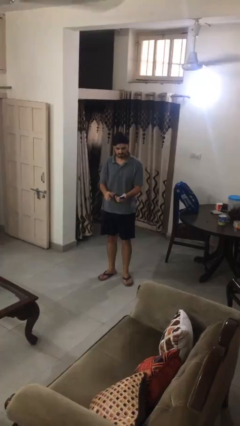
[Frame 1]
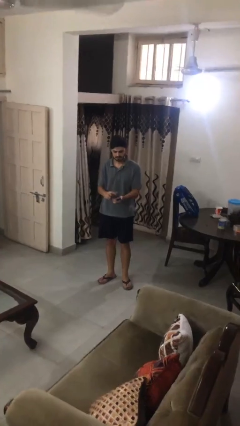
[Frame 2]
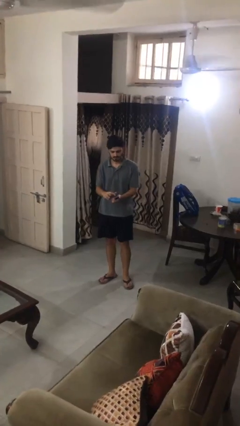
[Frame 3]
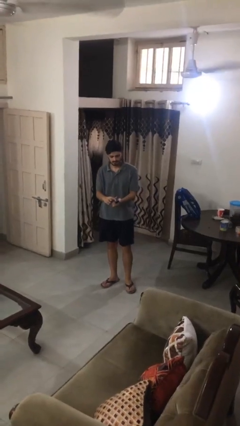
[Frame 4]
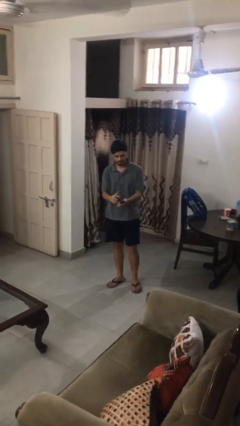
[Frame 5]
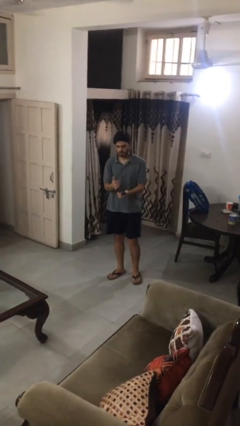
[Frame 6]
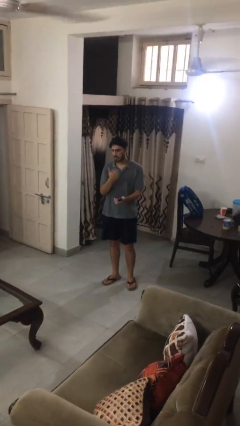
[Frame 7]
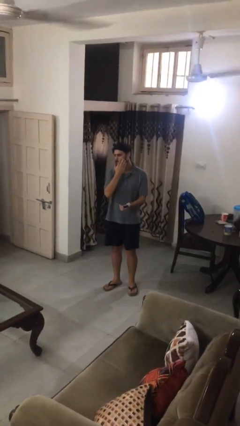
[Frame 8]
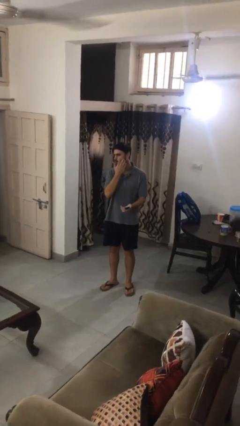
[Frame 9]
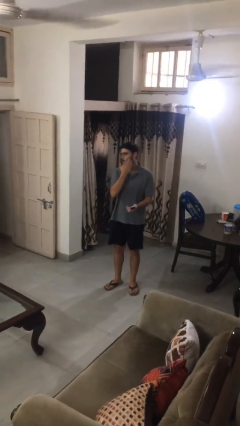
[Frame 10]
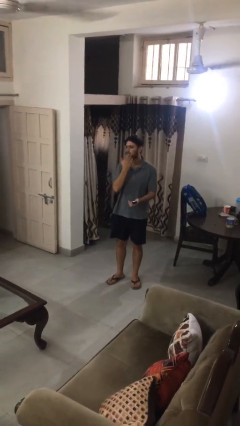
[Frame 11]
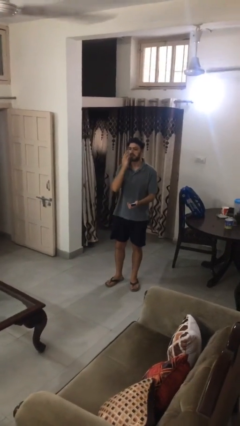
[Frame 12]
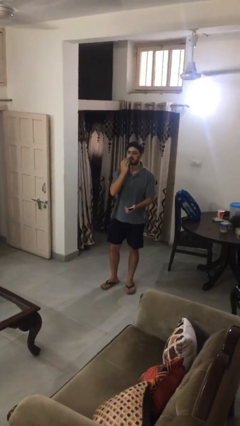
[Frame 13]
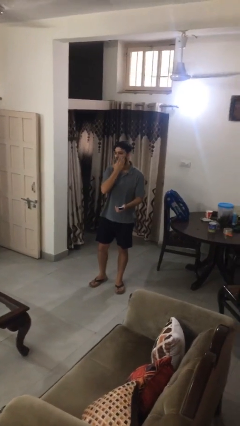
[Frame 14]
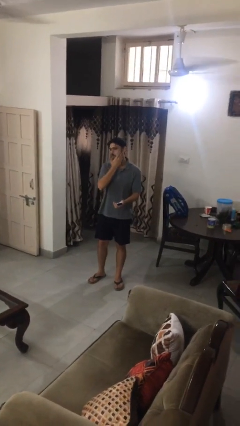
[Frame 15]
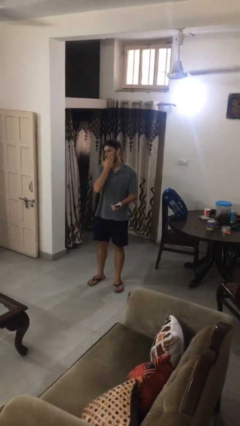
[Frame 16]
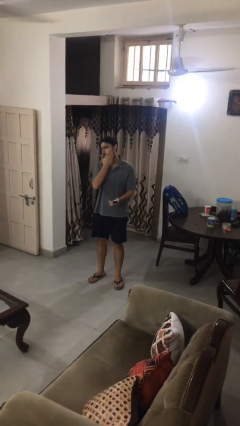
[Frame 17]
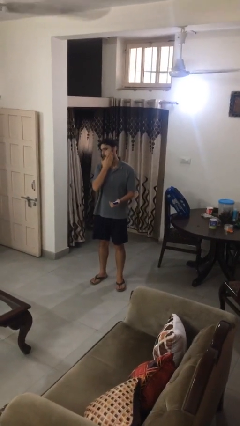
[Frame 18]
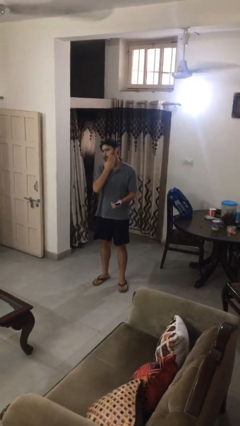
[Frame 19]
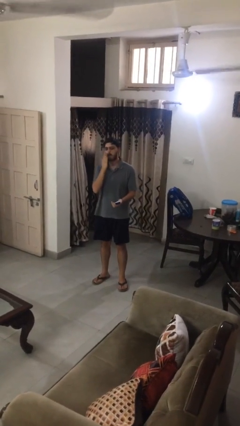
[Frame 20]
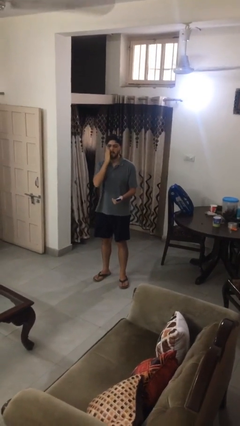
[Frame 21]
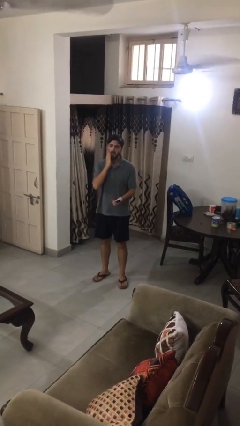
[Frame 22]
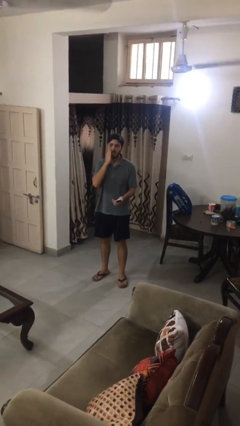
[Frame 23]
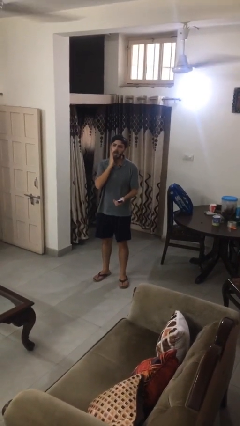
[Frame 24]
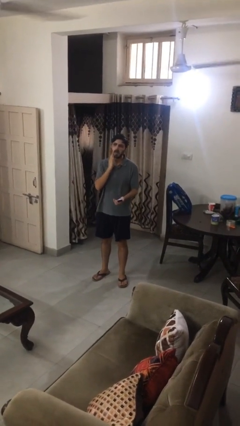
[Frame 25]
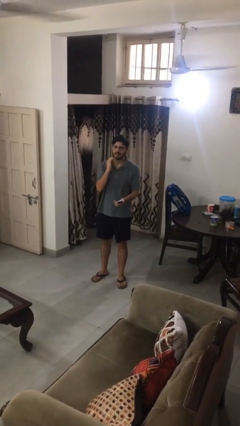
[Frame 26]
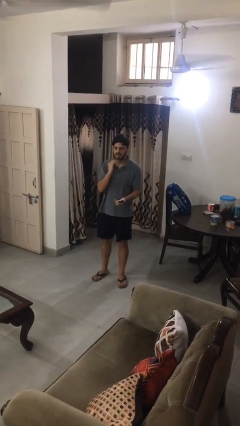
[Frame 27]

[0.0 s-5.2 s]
person applies facial moisturizer

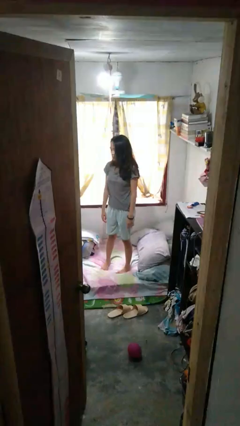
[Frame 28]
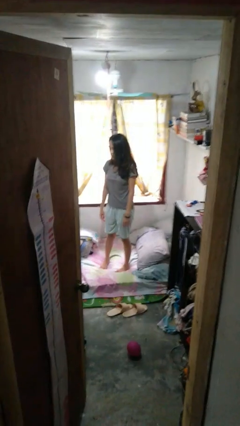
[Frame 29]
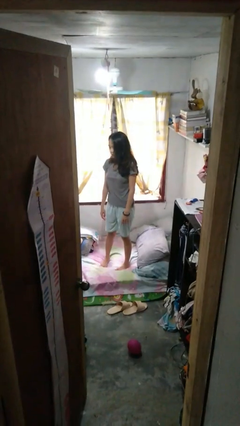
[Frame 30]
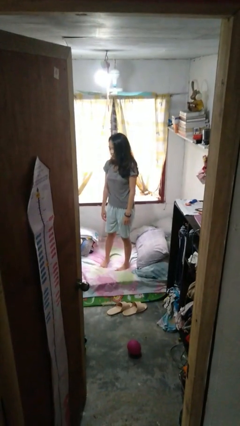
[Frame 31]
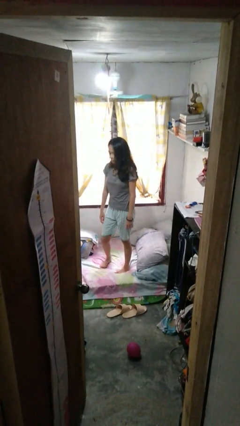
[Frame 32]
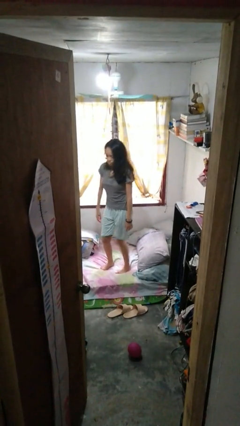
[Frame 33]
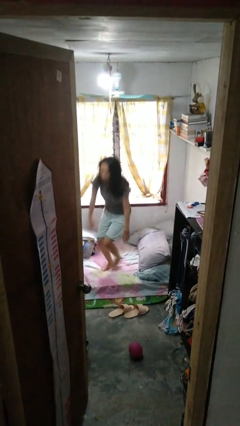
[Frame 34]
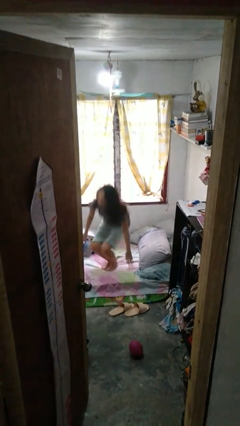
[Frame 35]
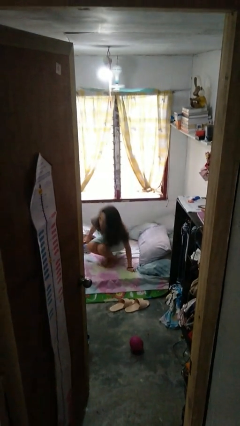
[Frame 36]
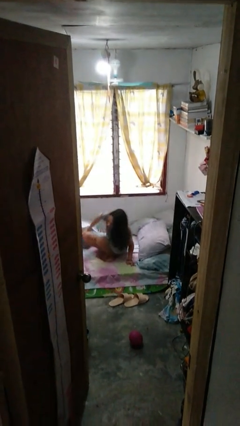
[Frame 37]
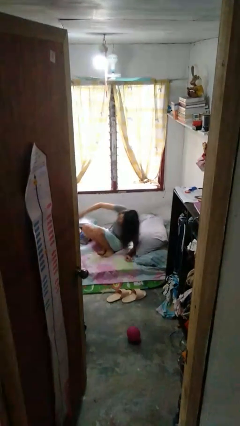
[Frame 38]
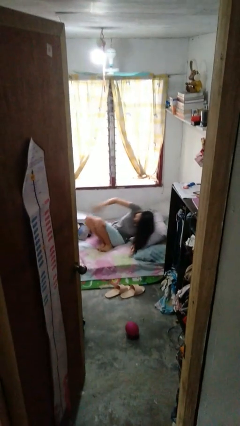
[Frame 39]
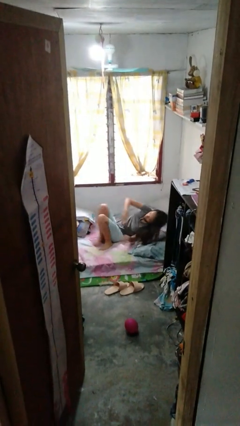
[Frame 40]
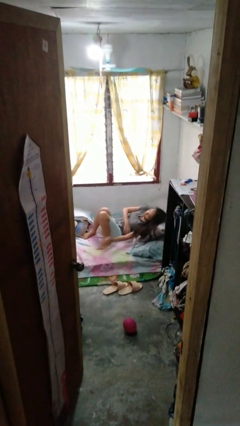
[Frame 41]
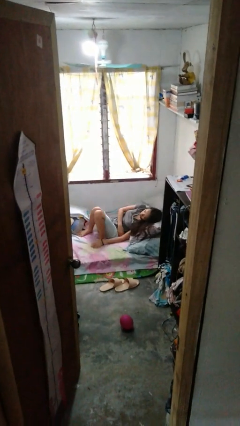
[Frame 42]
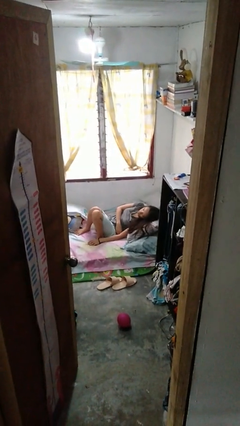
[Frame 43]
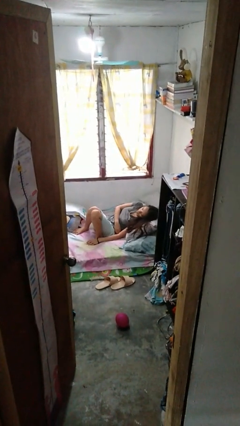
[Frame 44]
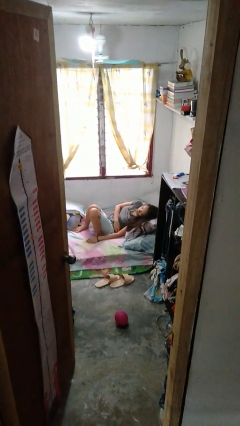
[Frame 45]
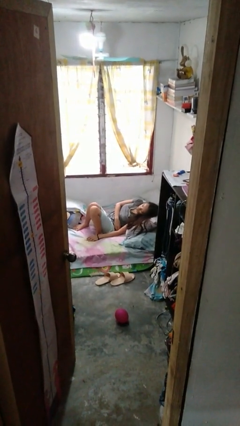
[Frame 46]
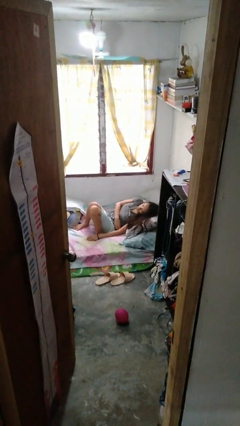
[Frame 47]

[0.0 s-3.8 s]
person lies down on bed

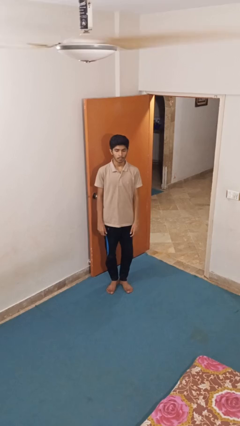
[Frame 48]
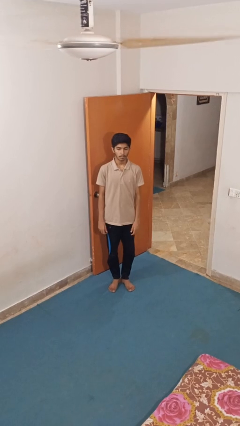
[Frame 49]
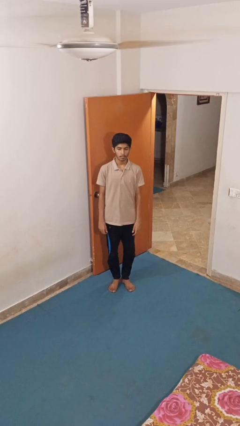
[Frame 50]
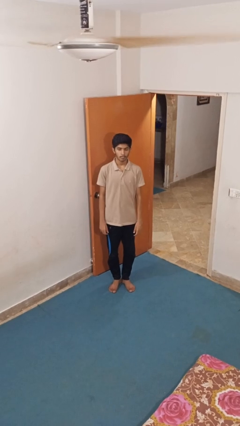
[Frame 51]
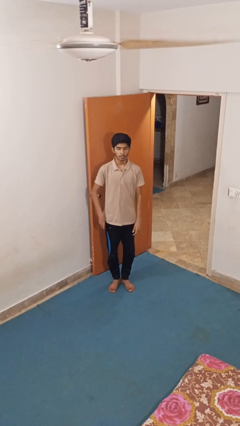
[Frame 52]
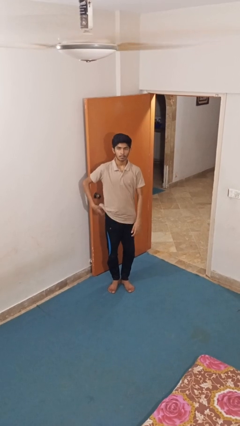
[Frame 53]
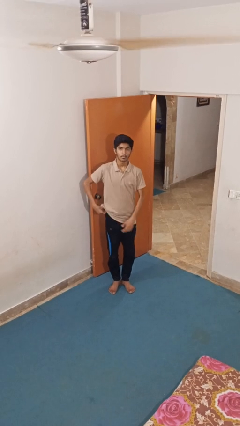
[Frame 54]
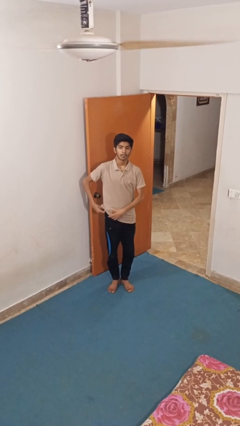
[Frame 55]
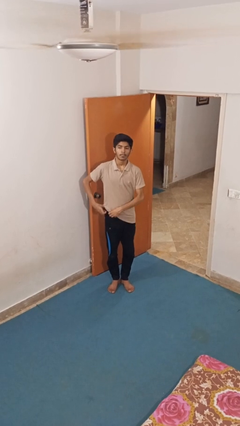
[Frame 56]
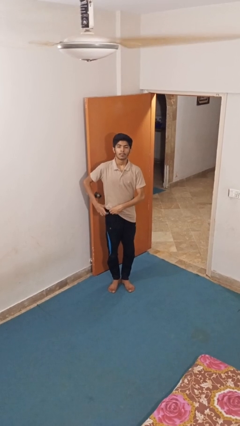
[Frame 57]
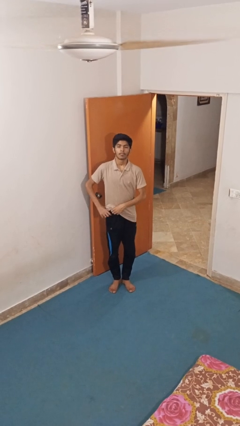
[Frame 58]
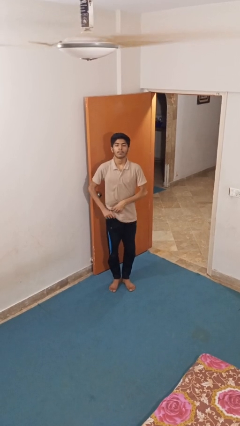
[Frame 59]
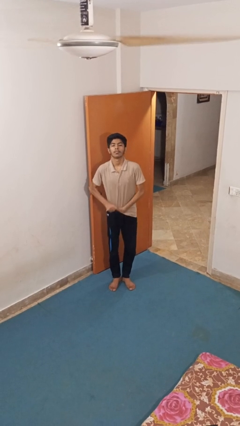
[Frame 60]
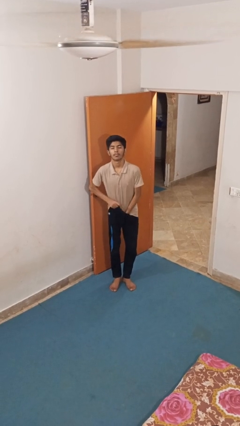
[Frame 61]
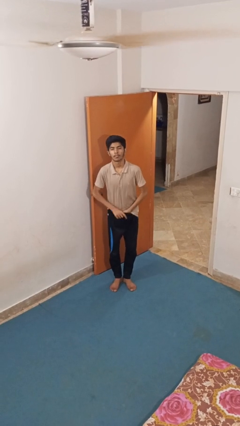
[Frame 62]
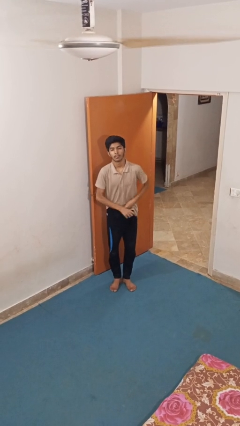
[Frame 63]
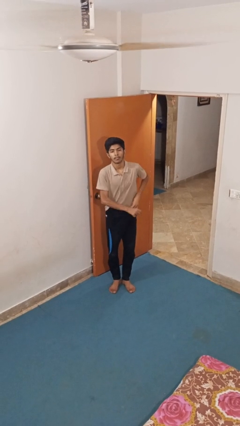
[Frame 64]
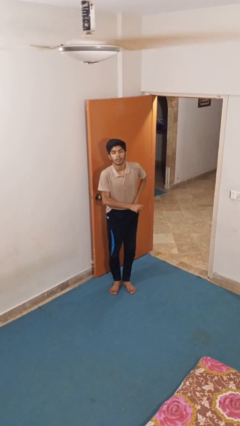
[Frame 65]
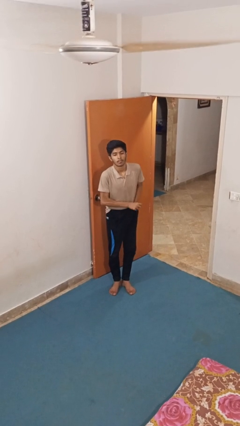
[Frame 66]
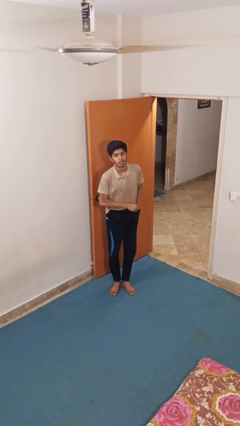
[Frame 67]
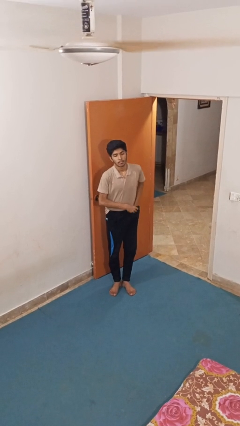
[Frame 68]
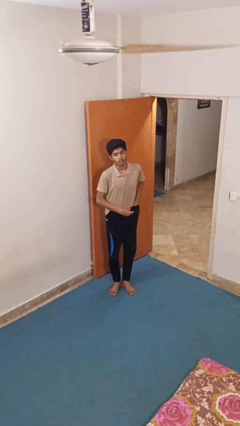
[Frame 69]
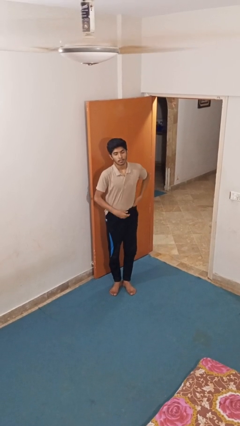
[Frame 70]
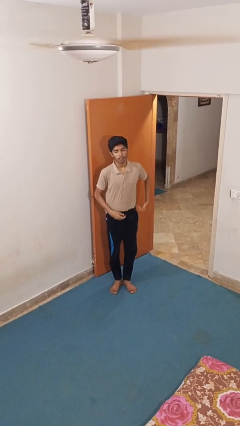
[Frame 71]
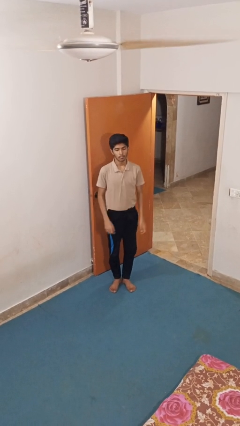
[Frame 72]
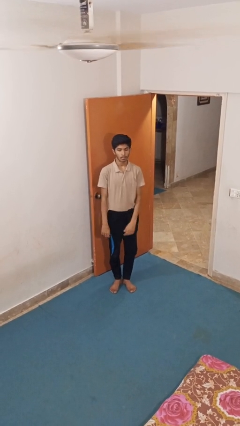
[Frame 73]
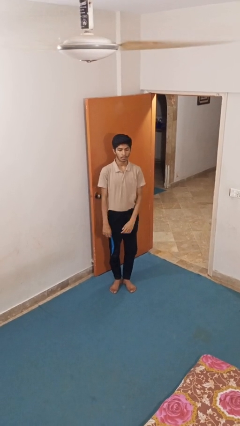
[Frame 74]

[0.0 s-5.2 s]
person tucks in shirt

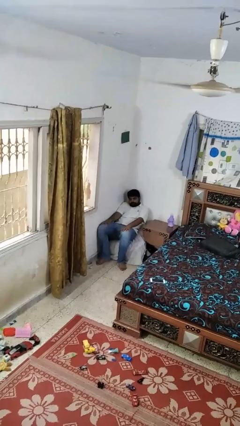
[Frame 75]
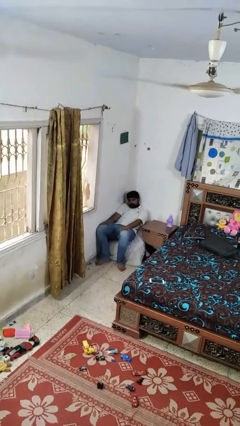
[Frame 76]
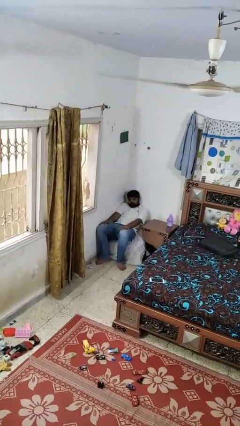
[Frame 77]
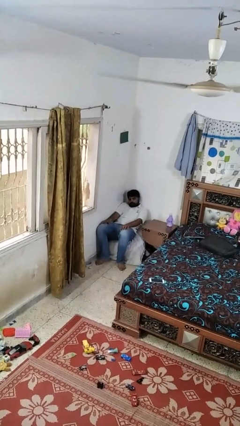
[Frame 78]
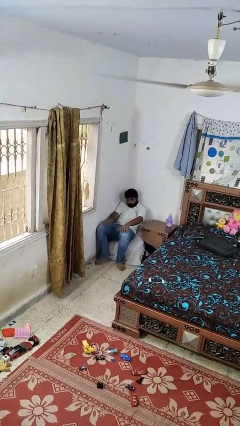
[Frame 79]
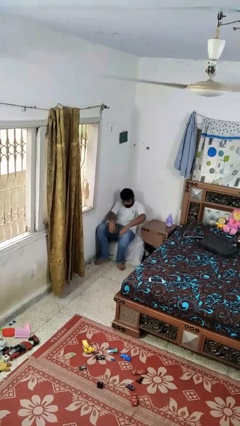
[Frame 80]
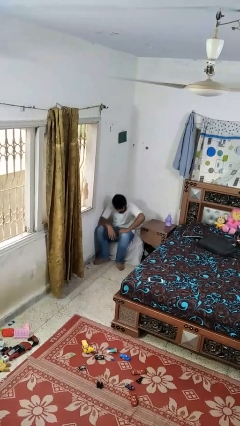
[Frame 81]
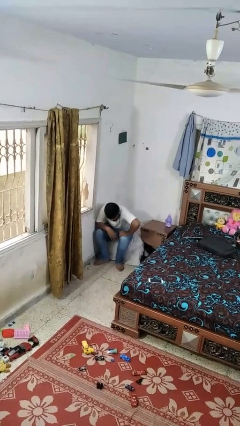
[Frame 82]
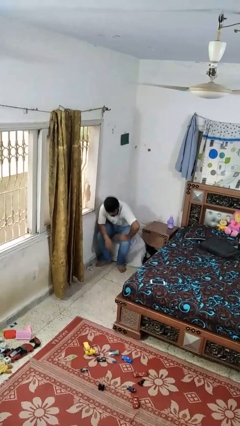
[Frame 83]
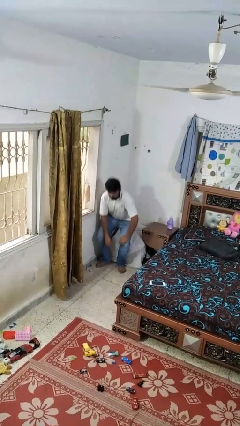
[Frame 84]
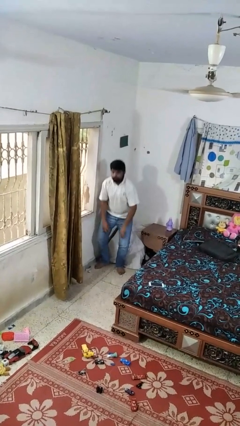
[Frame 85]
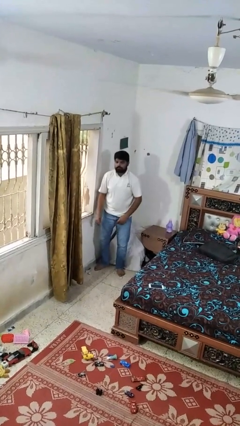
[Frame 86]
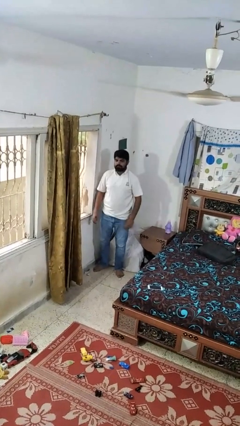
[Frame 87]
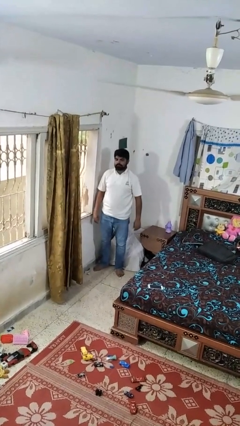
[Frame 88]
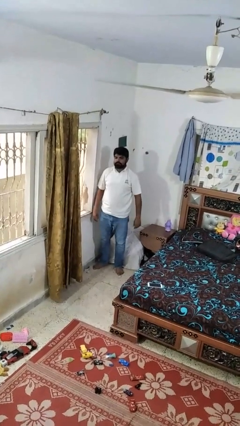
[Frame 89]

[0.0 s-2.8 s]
person stands up

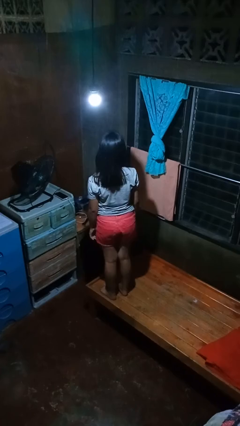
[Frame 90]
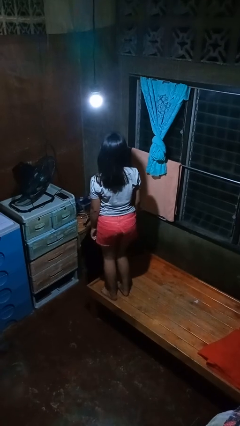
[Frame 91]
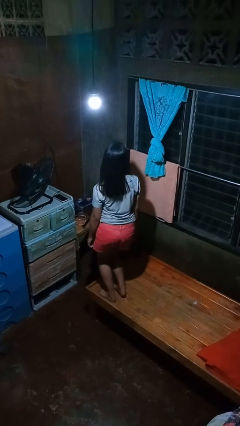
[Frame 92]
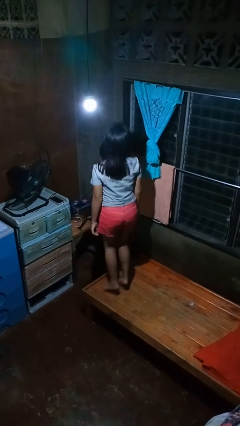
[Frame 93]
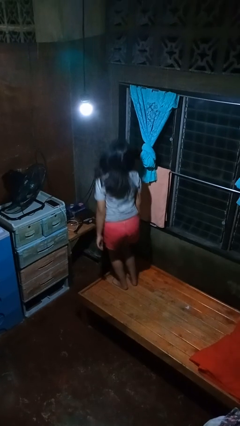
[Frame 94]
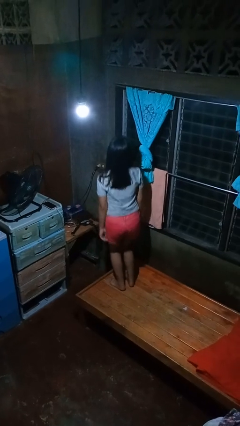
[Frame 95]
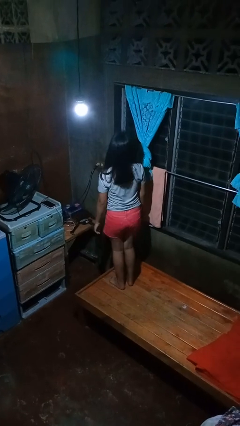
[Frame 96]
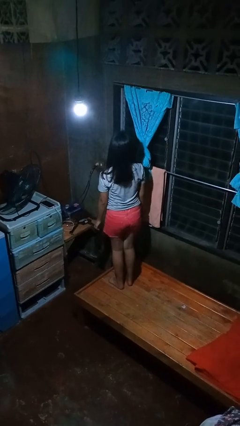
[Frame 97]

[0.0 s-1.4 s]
person jumps on bed
